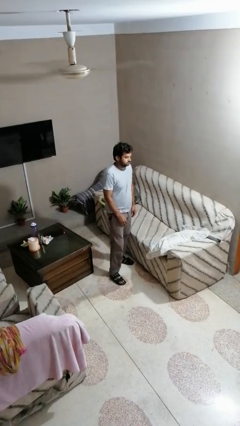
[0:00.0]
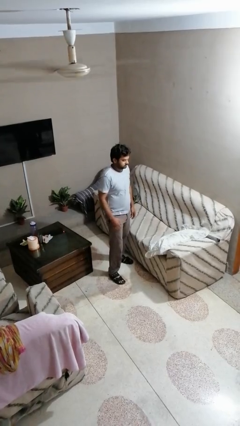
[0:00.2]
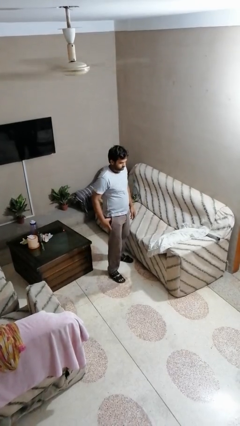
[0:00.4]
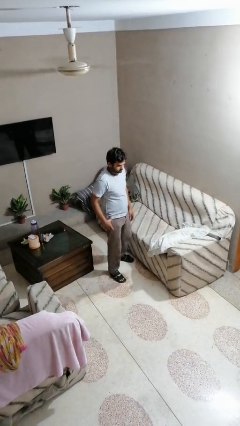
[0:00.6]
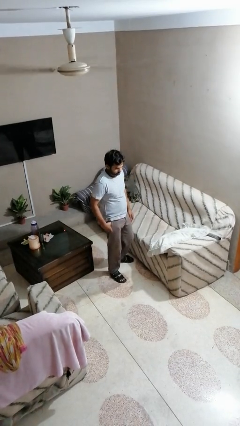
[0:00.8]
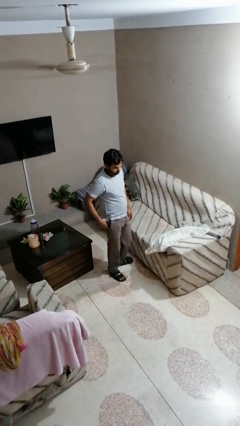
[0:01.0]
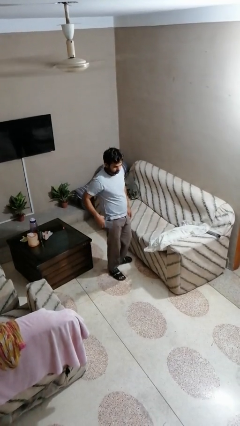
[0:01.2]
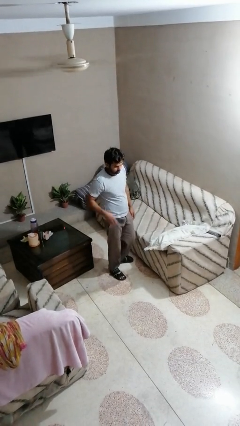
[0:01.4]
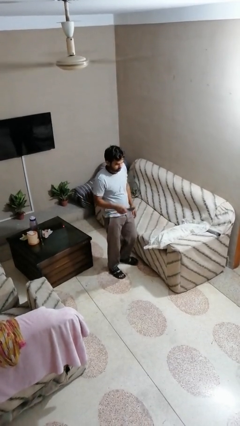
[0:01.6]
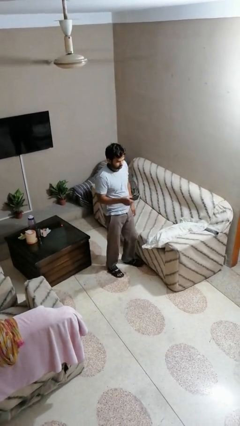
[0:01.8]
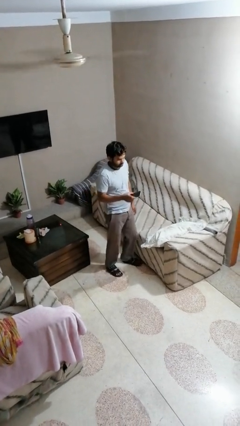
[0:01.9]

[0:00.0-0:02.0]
person takes phone from pocket

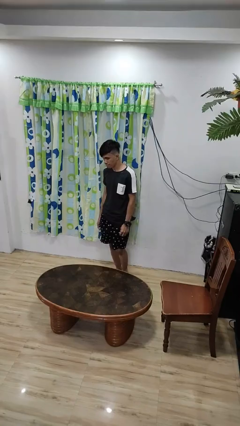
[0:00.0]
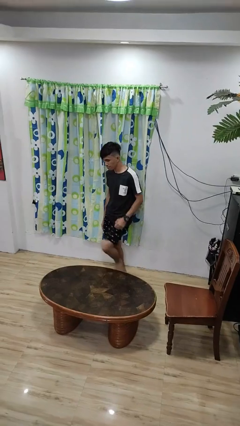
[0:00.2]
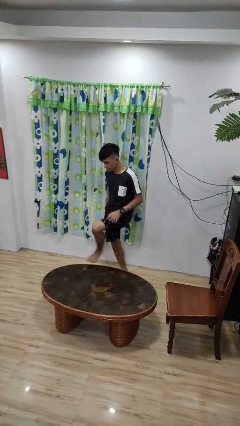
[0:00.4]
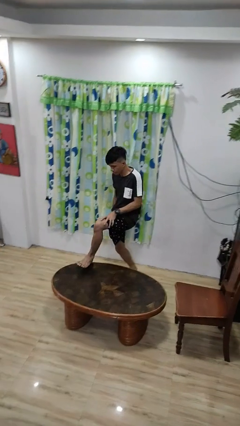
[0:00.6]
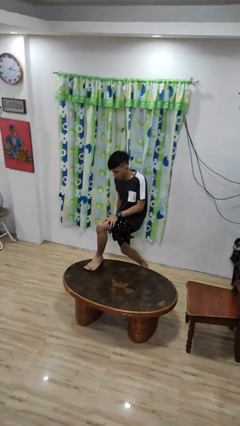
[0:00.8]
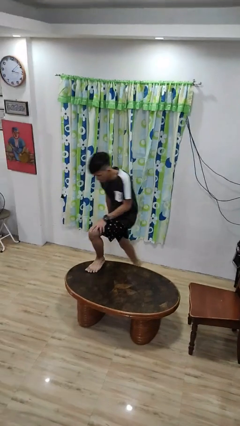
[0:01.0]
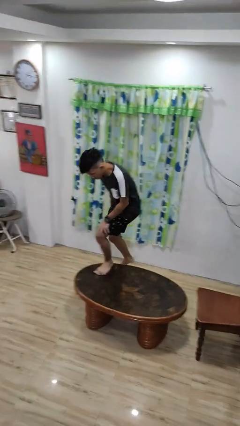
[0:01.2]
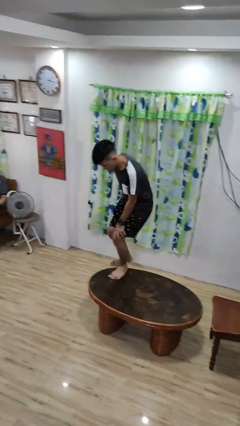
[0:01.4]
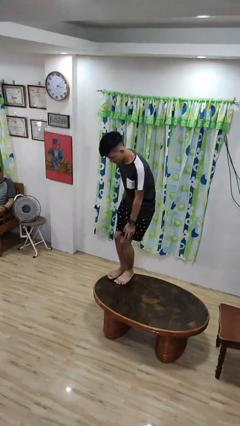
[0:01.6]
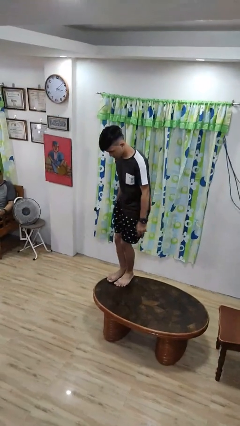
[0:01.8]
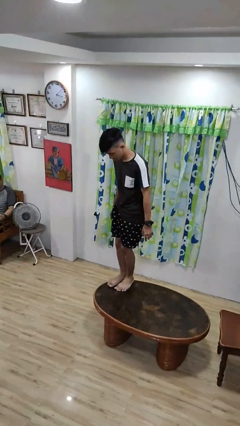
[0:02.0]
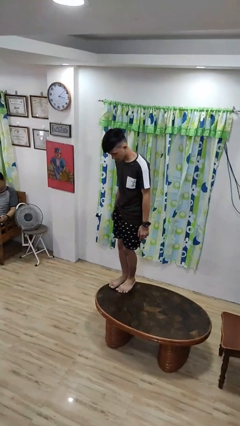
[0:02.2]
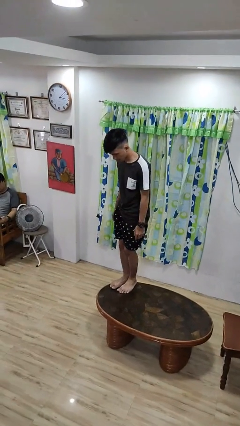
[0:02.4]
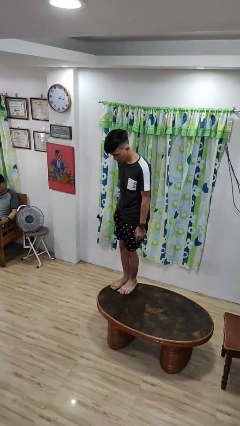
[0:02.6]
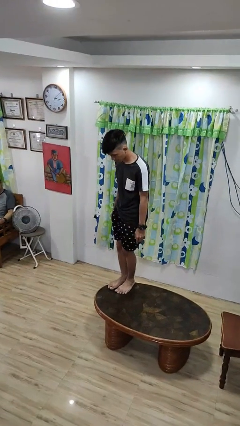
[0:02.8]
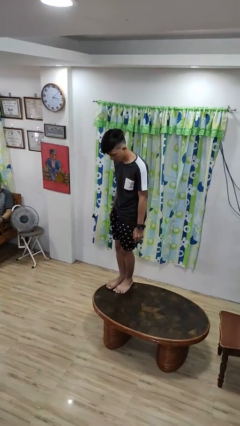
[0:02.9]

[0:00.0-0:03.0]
person climbs on table

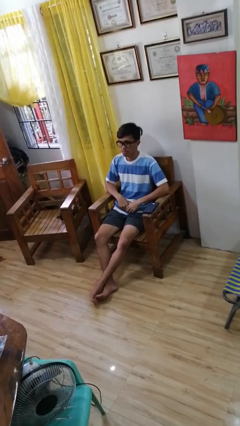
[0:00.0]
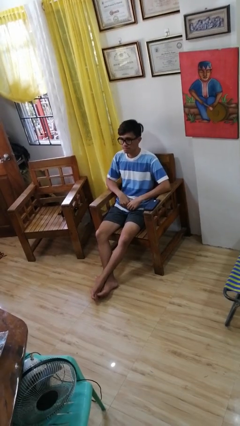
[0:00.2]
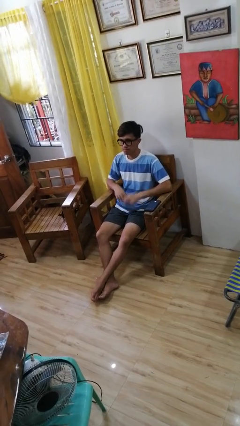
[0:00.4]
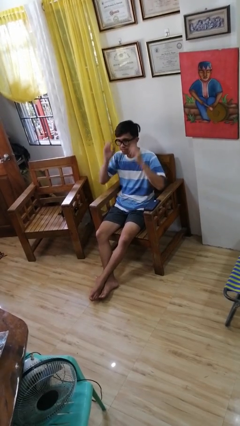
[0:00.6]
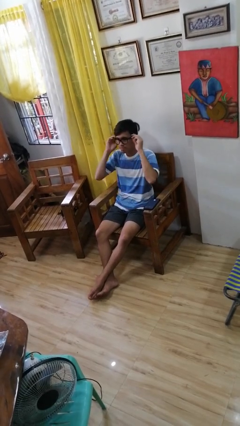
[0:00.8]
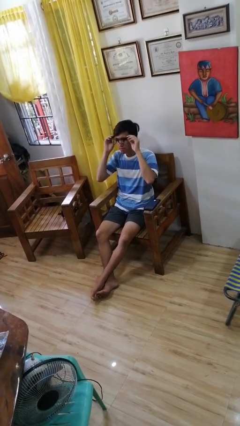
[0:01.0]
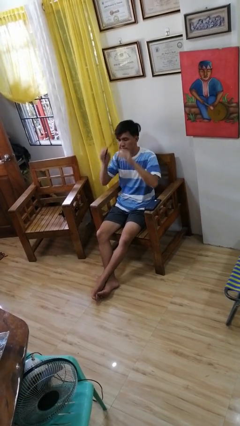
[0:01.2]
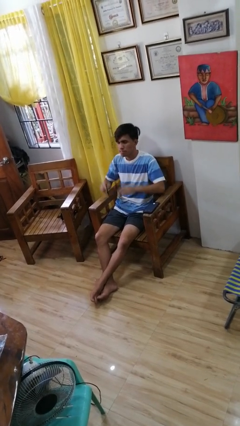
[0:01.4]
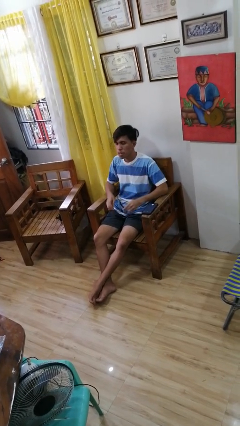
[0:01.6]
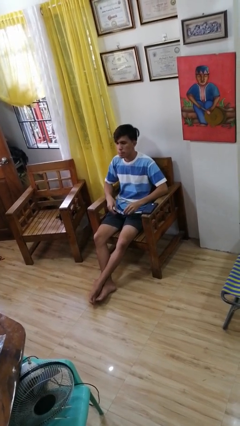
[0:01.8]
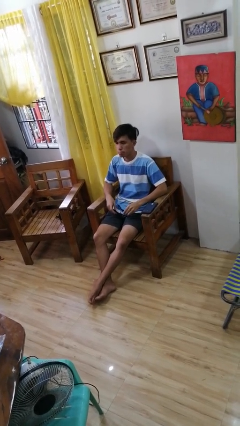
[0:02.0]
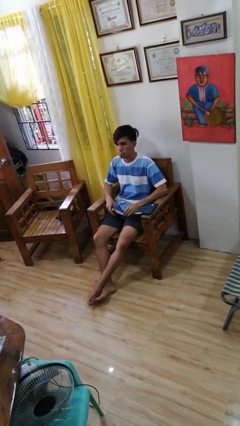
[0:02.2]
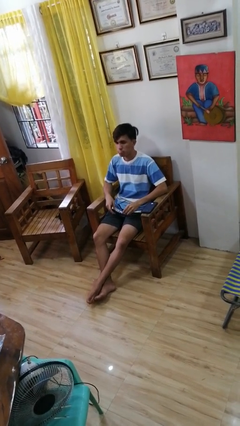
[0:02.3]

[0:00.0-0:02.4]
person takes off glasses

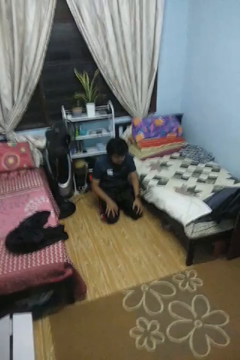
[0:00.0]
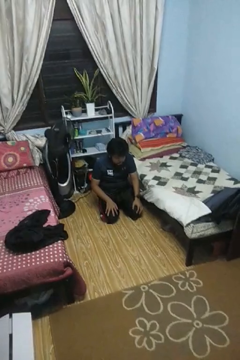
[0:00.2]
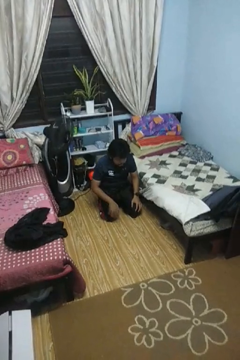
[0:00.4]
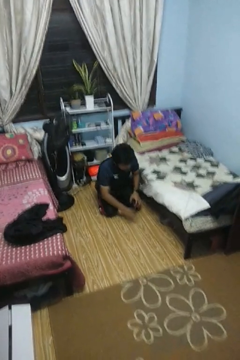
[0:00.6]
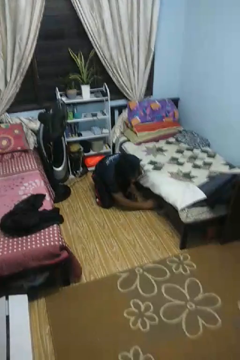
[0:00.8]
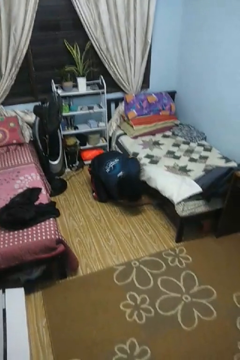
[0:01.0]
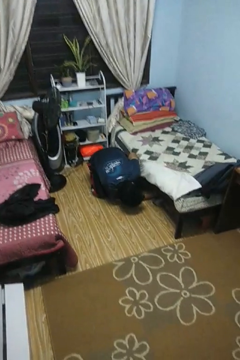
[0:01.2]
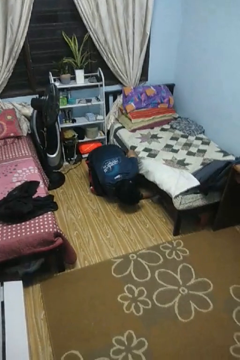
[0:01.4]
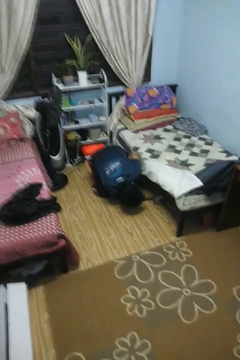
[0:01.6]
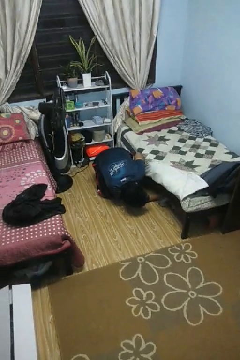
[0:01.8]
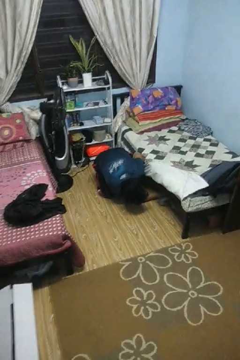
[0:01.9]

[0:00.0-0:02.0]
person searches under bed

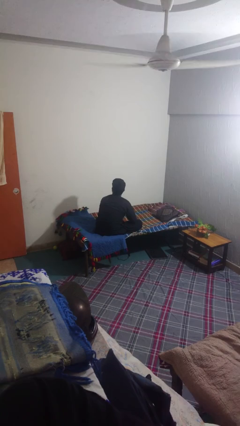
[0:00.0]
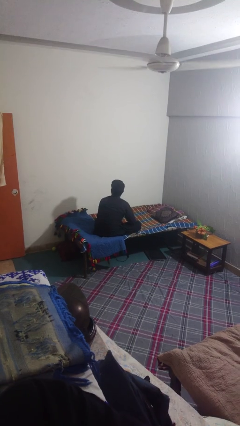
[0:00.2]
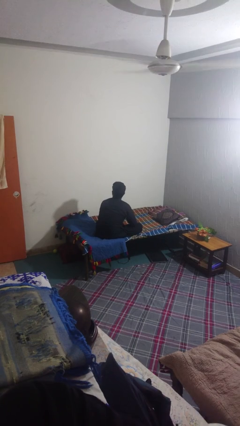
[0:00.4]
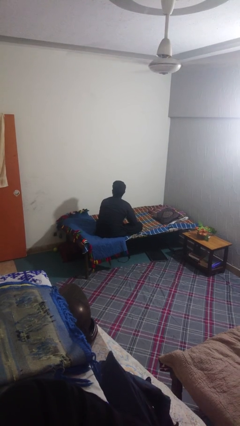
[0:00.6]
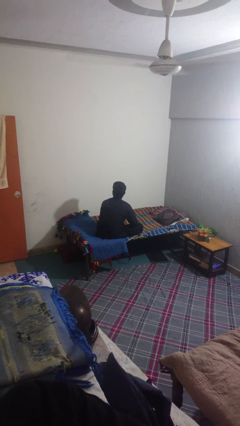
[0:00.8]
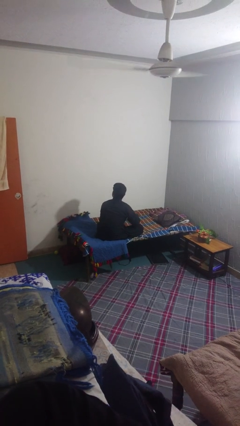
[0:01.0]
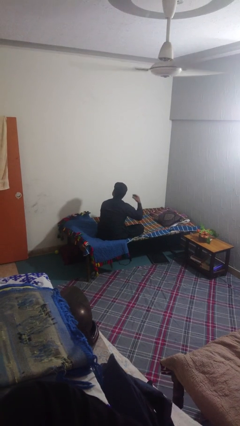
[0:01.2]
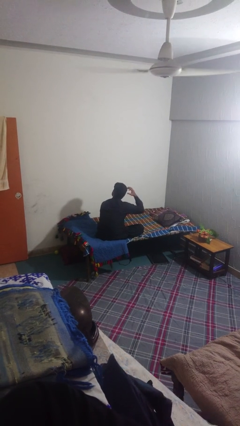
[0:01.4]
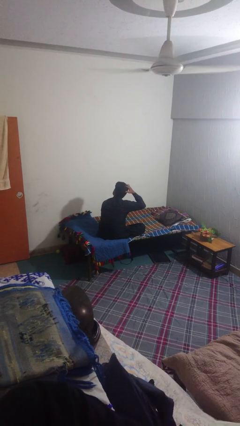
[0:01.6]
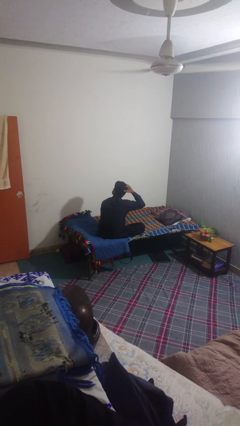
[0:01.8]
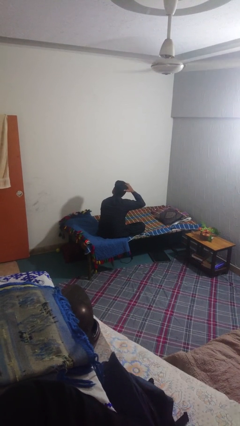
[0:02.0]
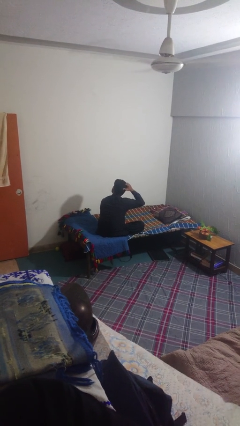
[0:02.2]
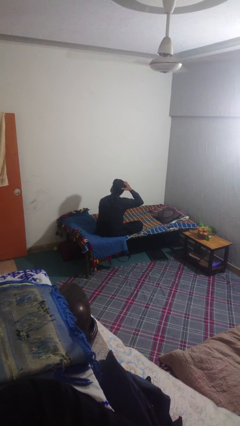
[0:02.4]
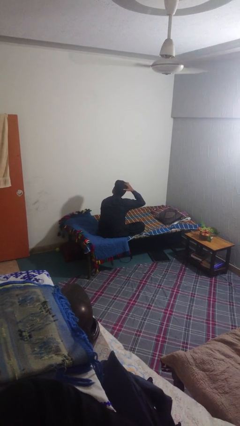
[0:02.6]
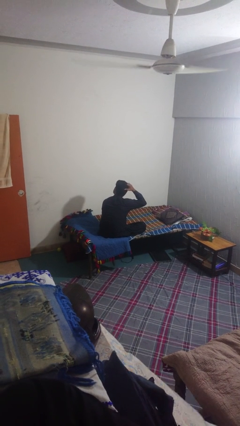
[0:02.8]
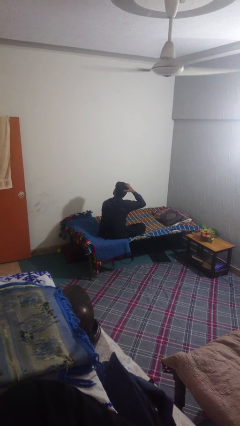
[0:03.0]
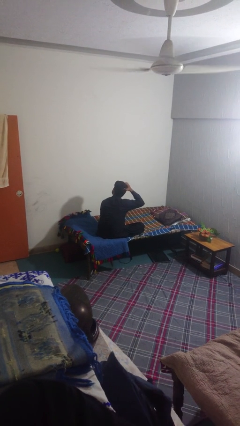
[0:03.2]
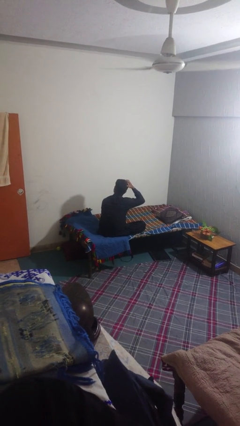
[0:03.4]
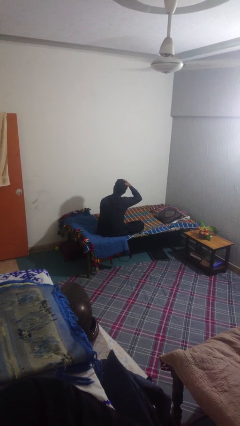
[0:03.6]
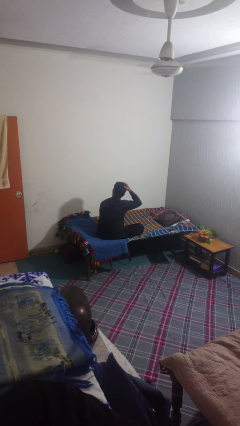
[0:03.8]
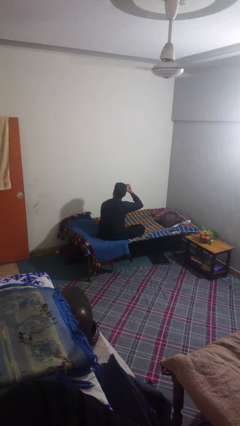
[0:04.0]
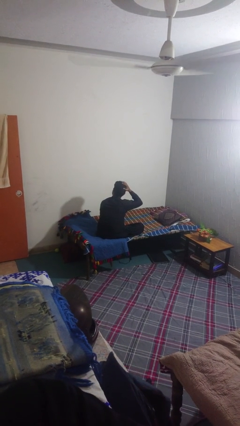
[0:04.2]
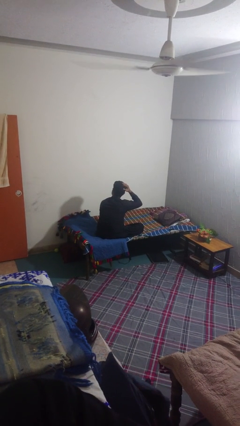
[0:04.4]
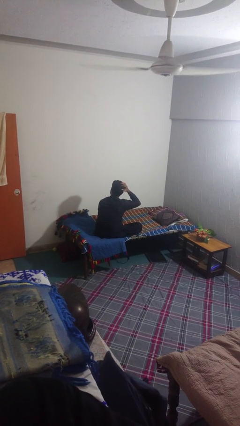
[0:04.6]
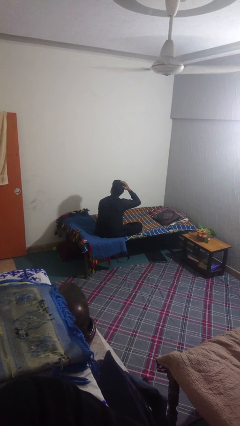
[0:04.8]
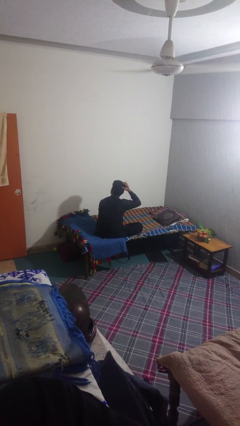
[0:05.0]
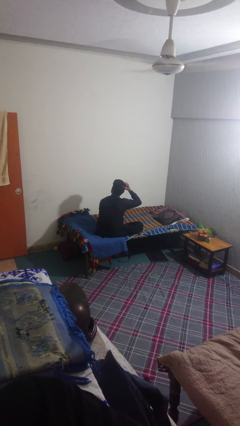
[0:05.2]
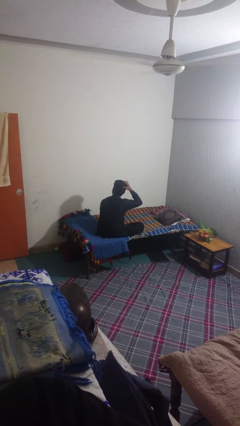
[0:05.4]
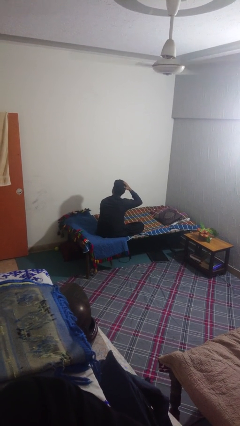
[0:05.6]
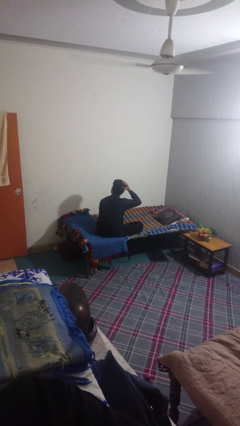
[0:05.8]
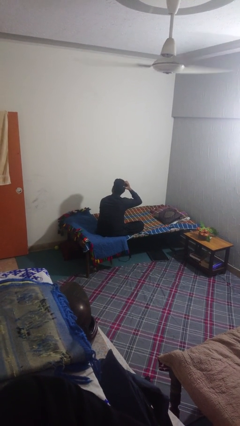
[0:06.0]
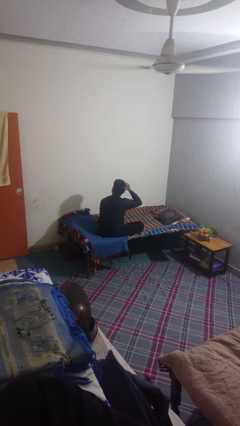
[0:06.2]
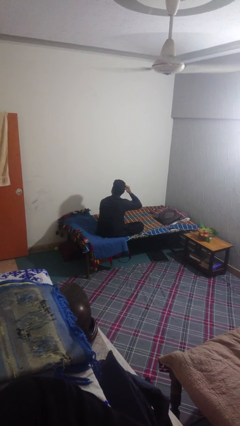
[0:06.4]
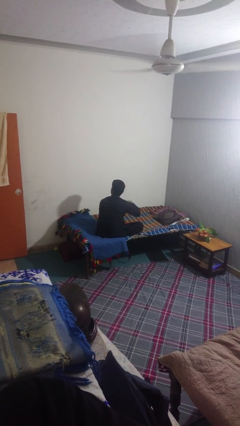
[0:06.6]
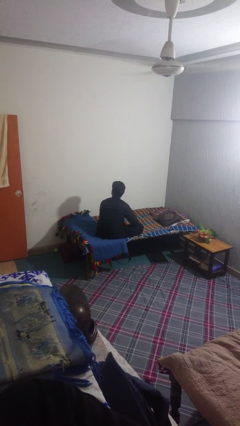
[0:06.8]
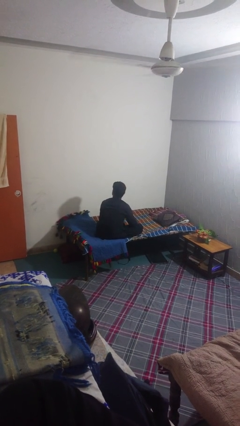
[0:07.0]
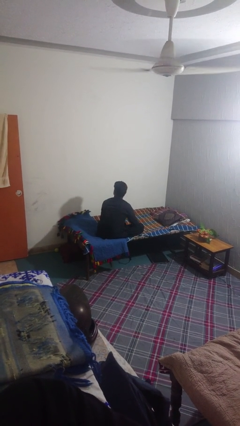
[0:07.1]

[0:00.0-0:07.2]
person strokes hair

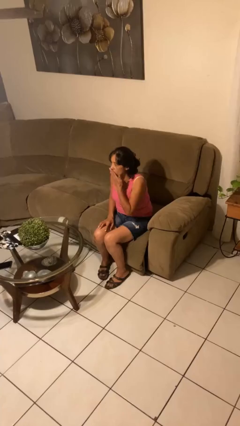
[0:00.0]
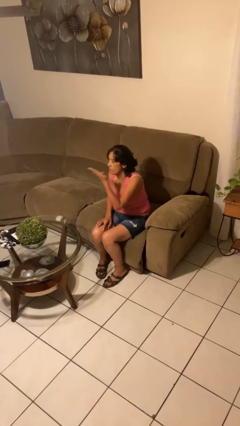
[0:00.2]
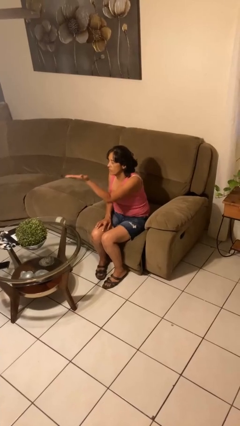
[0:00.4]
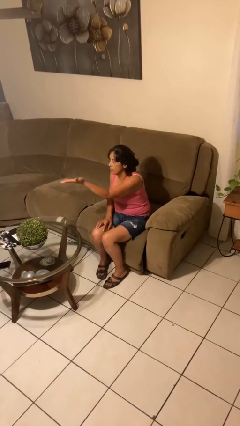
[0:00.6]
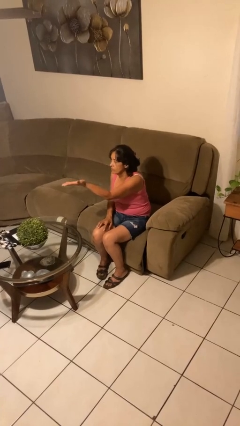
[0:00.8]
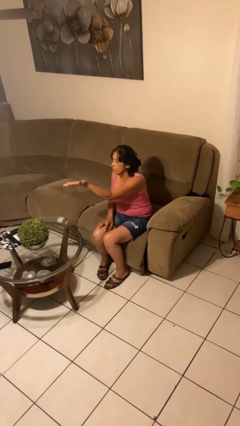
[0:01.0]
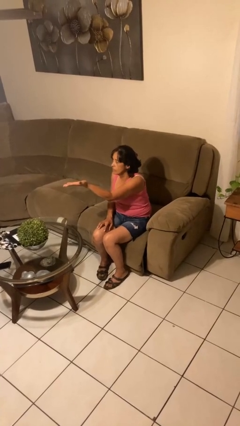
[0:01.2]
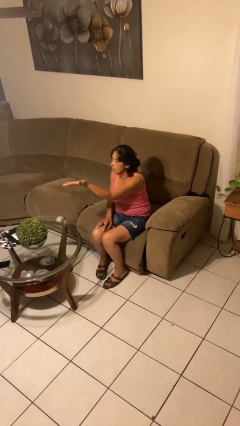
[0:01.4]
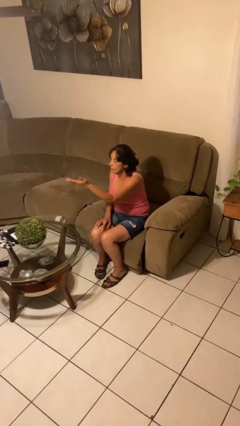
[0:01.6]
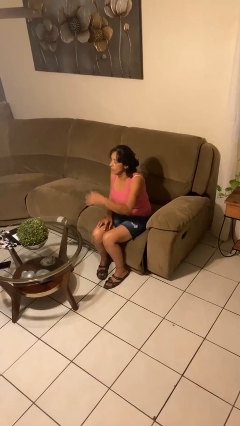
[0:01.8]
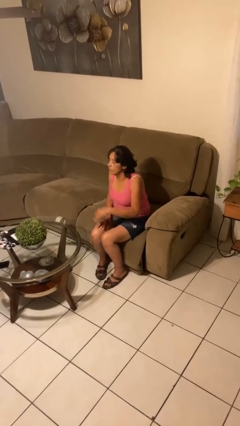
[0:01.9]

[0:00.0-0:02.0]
person gestures blow kiss
